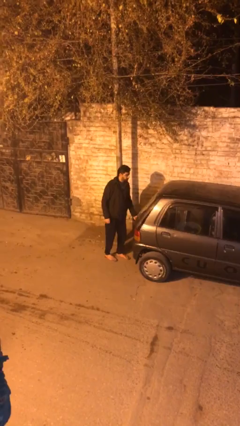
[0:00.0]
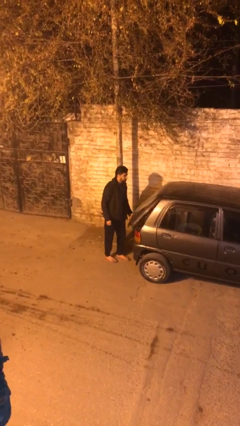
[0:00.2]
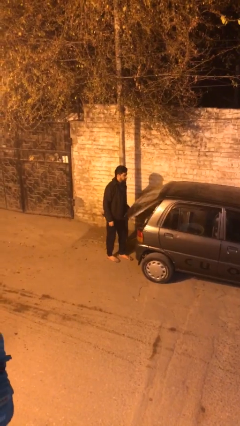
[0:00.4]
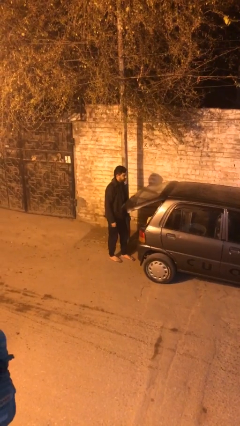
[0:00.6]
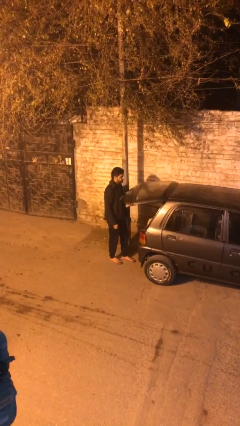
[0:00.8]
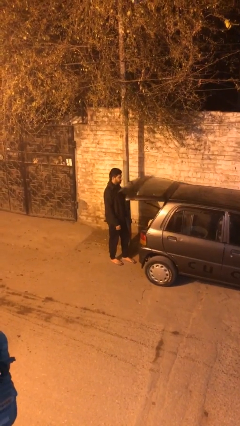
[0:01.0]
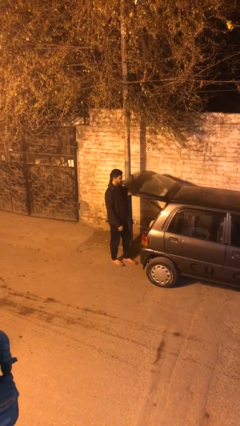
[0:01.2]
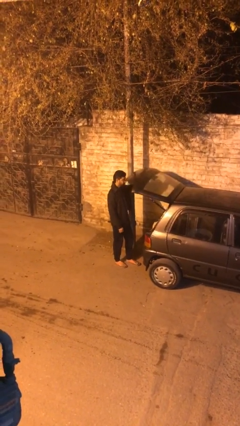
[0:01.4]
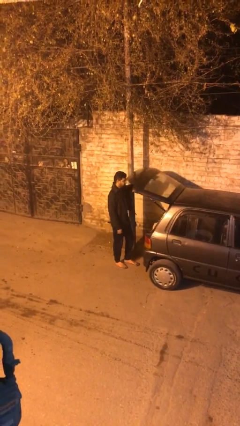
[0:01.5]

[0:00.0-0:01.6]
person opens car trunk

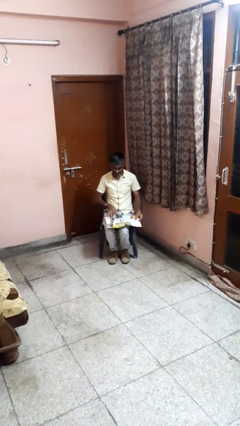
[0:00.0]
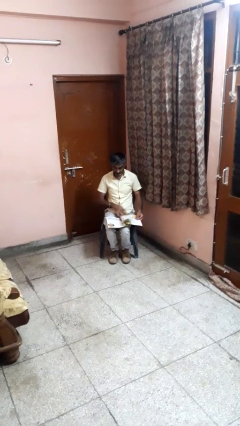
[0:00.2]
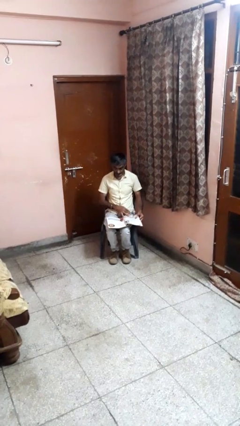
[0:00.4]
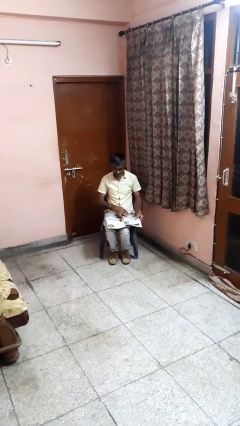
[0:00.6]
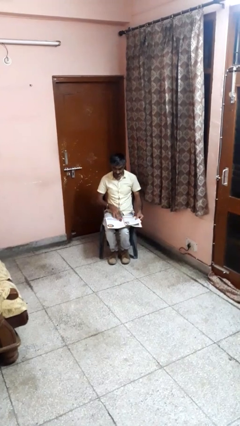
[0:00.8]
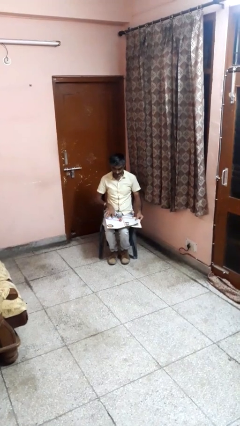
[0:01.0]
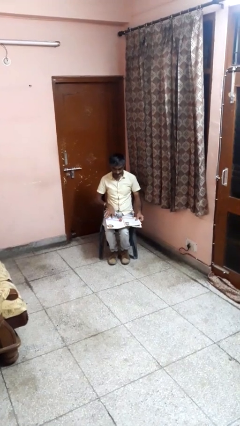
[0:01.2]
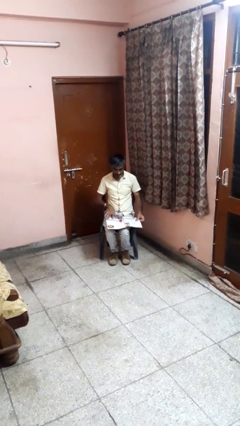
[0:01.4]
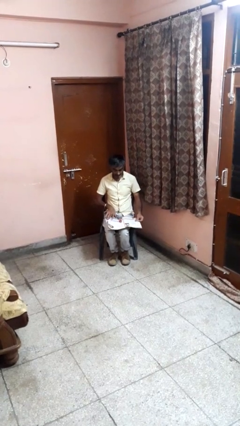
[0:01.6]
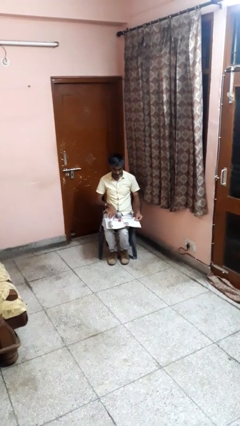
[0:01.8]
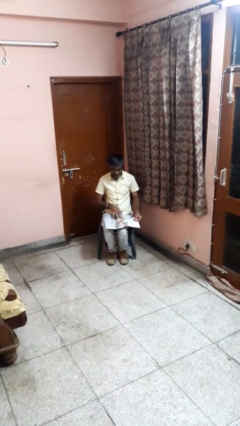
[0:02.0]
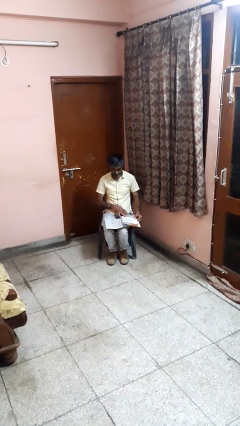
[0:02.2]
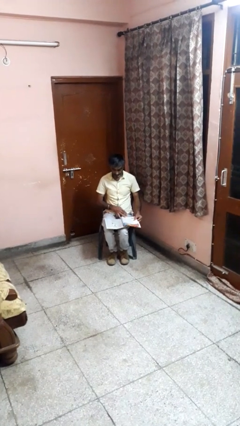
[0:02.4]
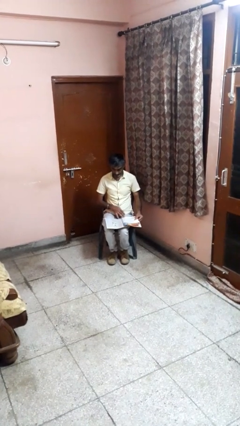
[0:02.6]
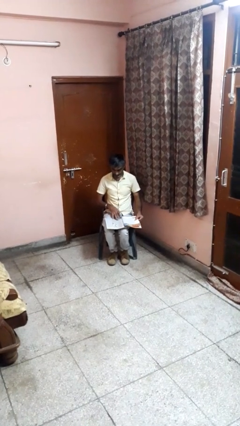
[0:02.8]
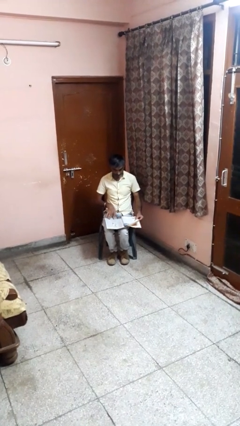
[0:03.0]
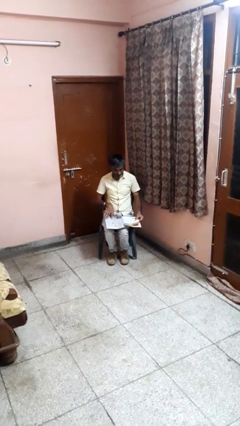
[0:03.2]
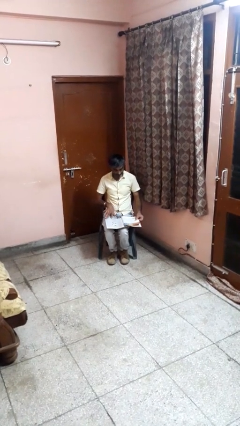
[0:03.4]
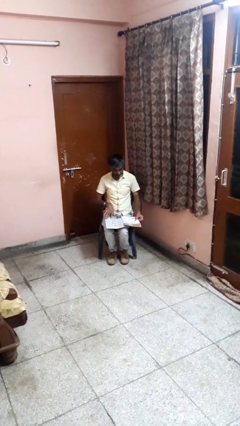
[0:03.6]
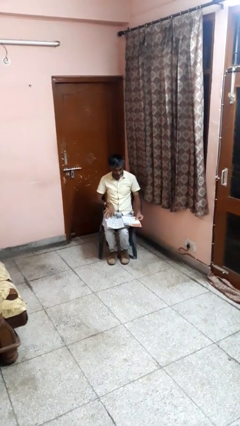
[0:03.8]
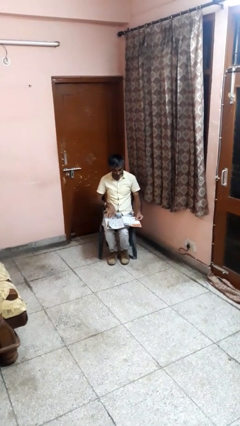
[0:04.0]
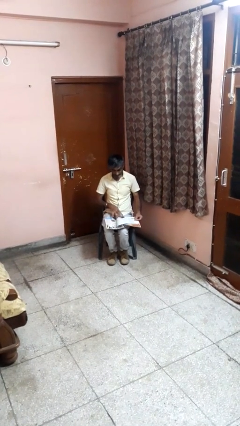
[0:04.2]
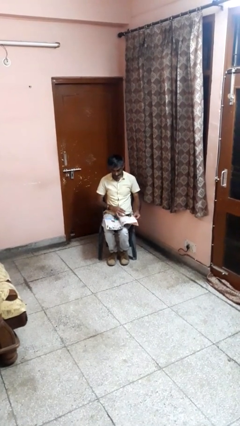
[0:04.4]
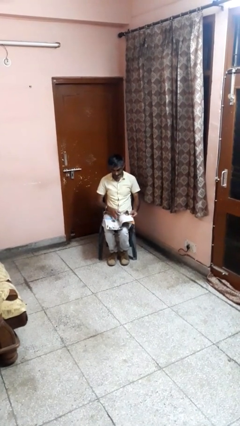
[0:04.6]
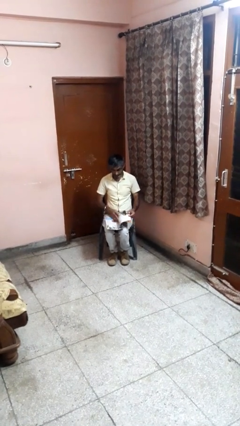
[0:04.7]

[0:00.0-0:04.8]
person reads magazine

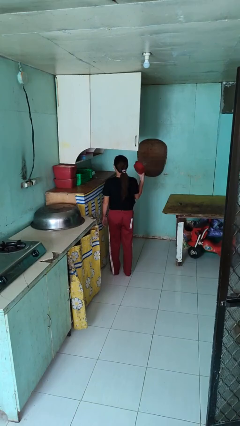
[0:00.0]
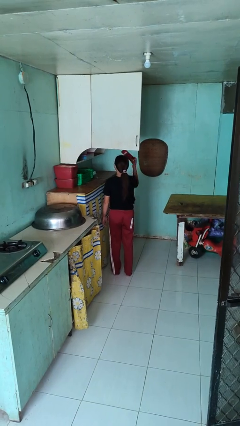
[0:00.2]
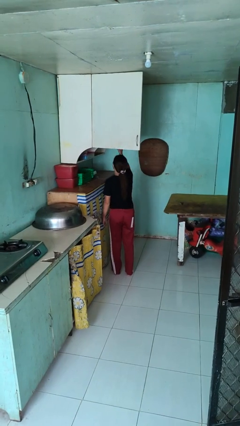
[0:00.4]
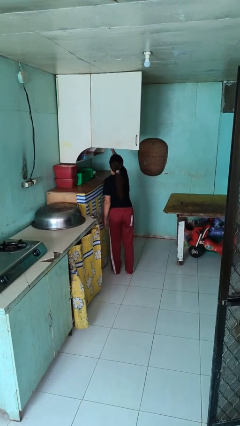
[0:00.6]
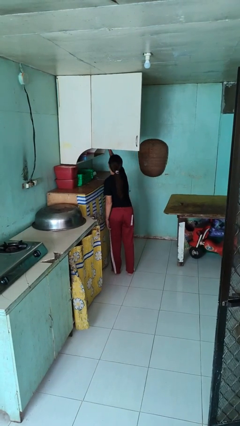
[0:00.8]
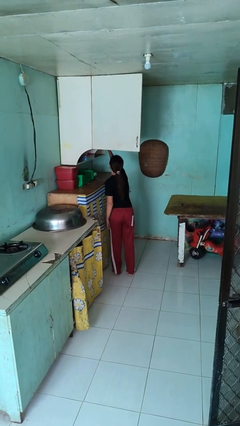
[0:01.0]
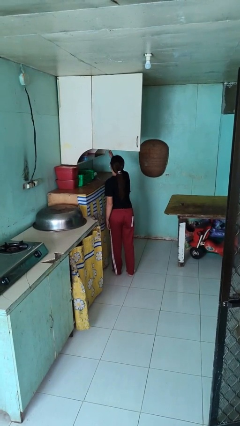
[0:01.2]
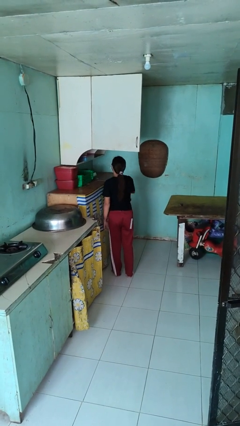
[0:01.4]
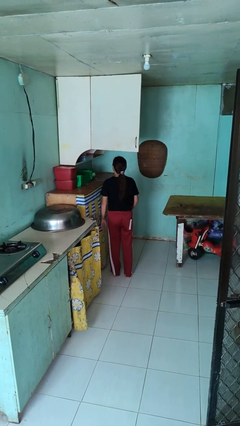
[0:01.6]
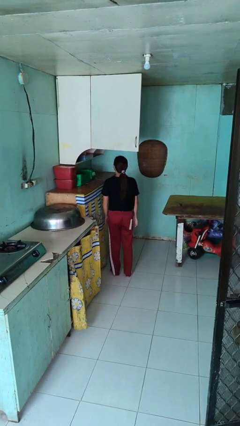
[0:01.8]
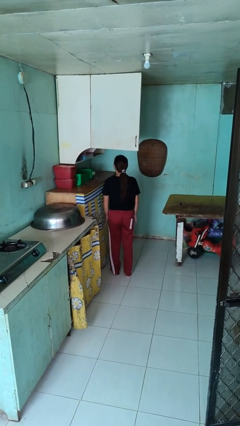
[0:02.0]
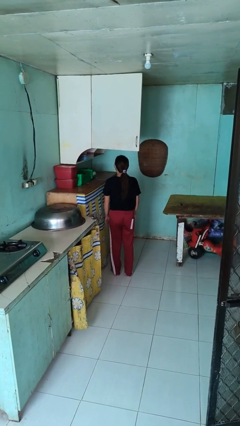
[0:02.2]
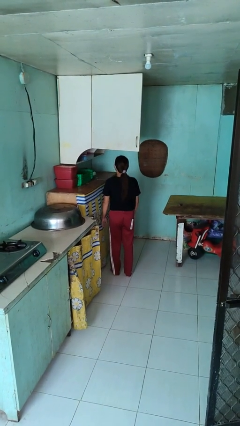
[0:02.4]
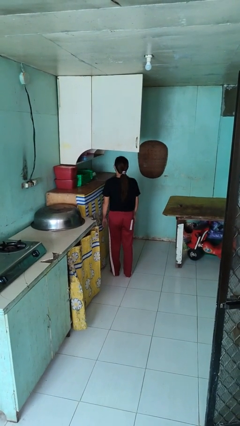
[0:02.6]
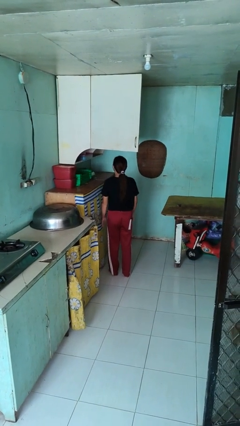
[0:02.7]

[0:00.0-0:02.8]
person puts object in cabinet

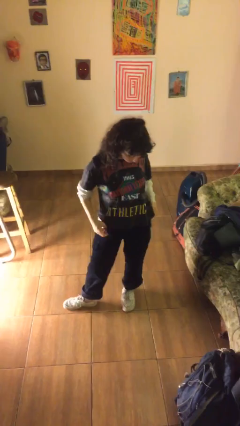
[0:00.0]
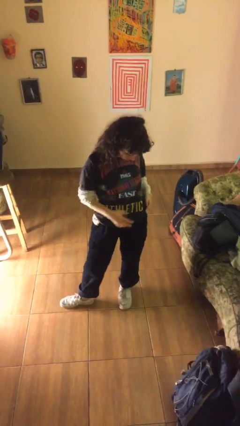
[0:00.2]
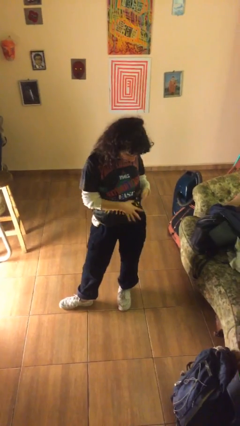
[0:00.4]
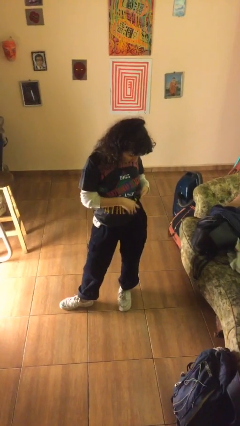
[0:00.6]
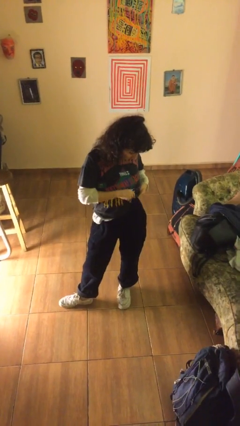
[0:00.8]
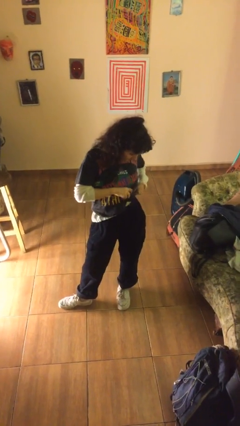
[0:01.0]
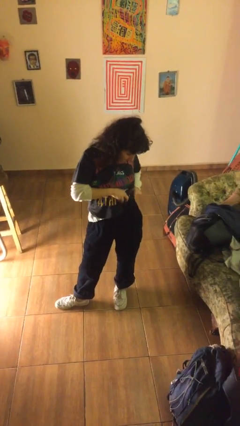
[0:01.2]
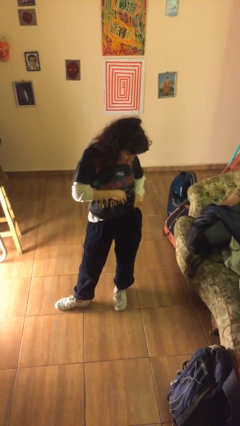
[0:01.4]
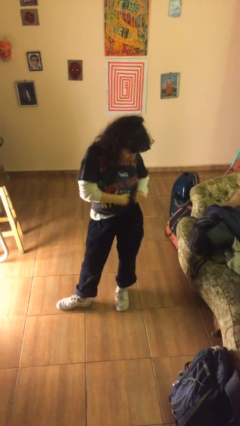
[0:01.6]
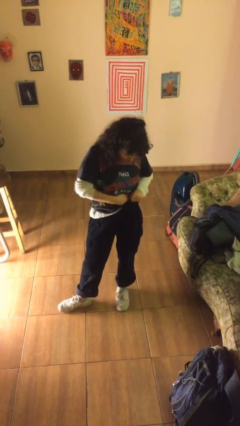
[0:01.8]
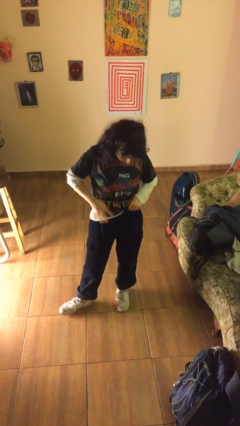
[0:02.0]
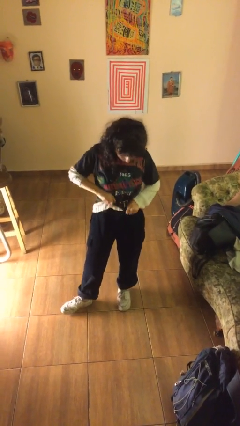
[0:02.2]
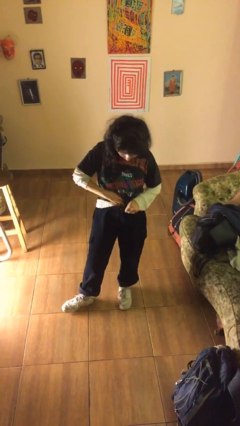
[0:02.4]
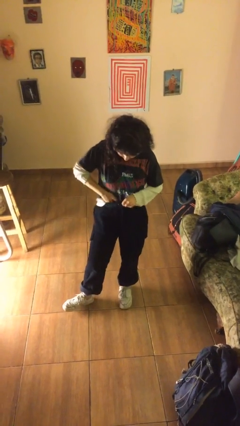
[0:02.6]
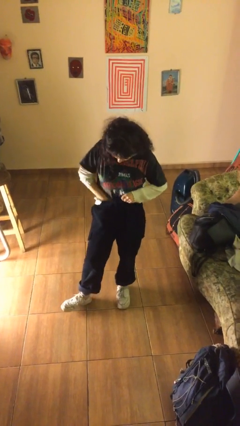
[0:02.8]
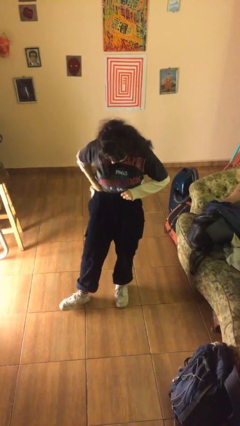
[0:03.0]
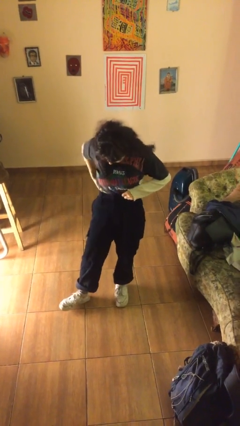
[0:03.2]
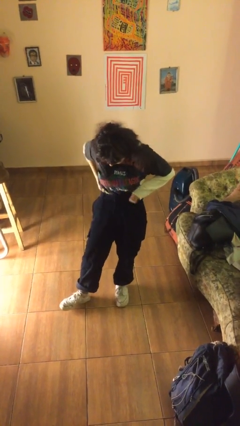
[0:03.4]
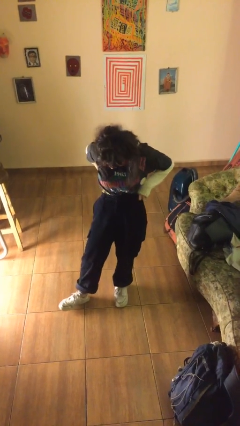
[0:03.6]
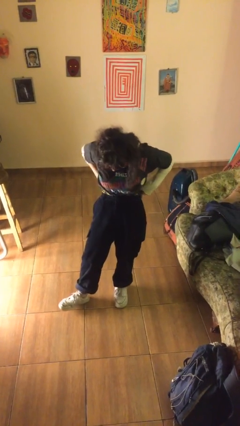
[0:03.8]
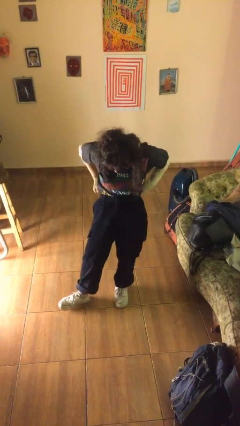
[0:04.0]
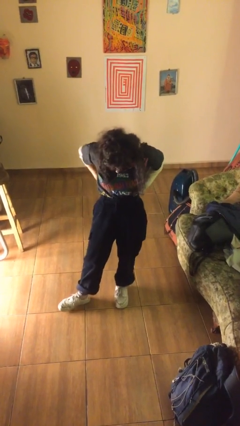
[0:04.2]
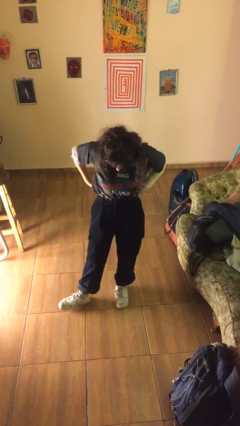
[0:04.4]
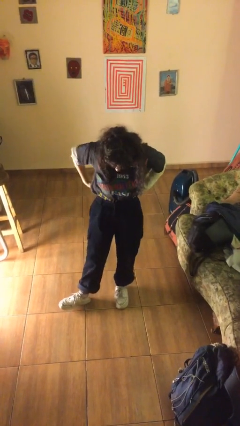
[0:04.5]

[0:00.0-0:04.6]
person tucks in shirt

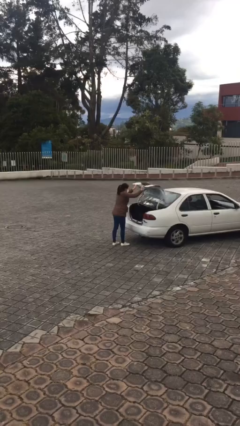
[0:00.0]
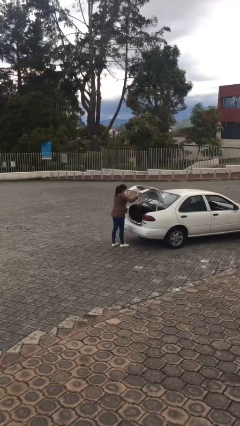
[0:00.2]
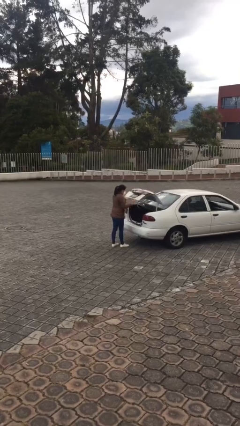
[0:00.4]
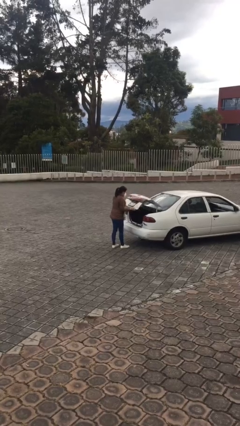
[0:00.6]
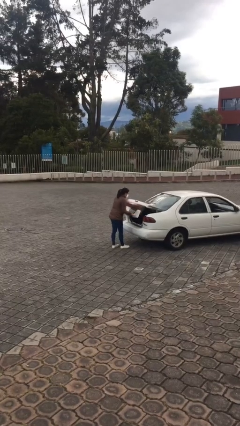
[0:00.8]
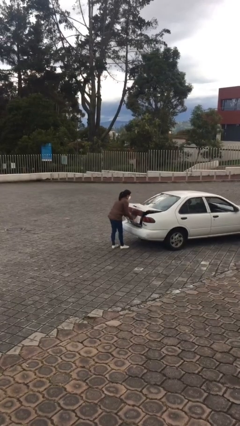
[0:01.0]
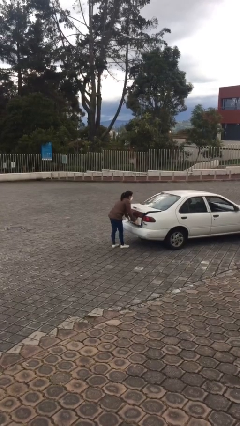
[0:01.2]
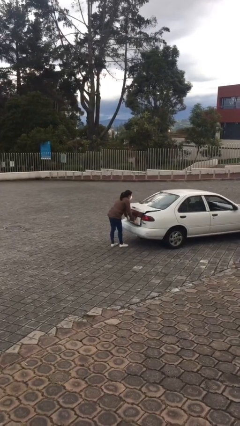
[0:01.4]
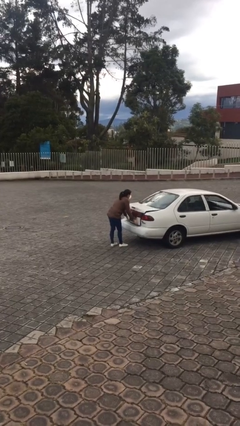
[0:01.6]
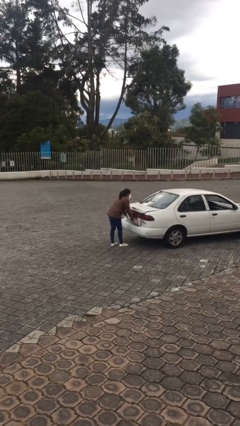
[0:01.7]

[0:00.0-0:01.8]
person closes car trunk

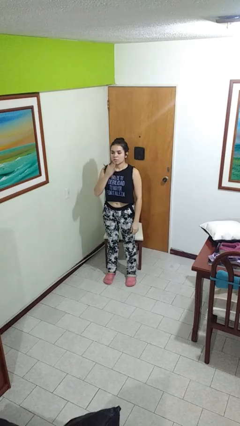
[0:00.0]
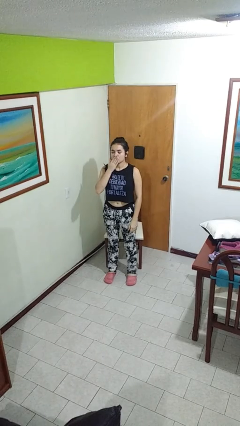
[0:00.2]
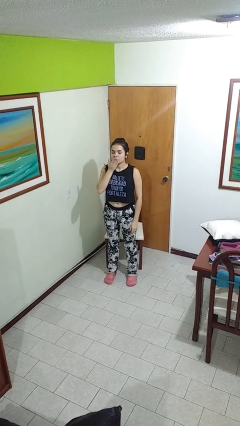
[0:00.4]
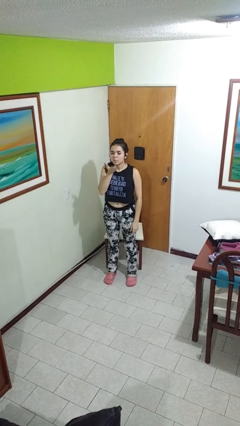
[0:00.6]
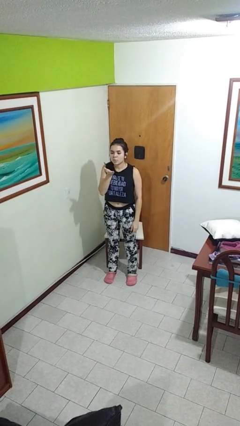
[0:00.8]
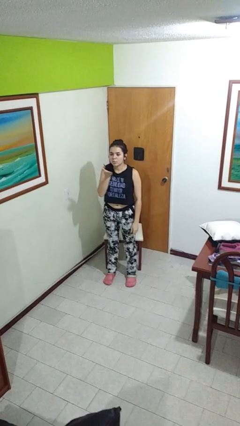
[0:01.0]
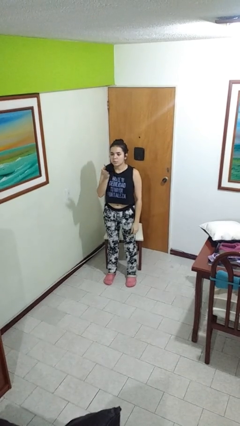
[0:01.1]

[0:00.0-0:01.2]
person gestures blow kiss

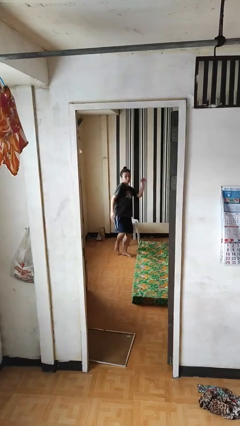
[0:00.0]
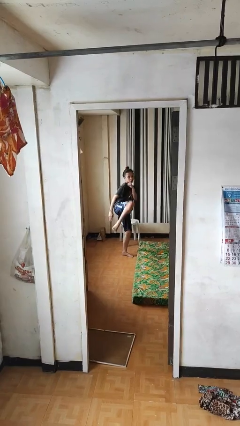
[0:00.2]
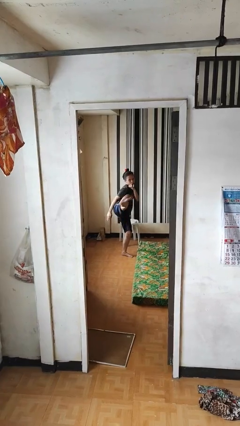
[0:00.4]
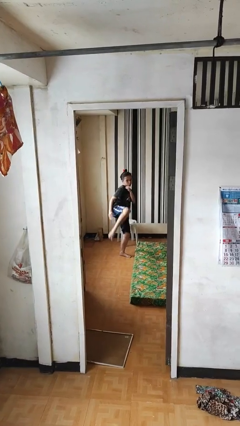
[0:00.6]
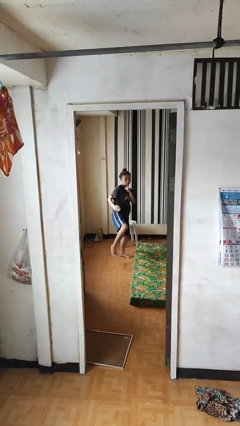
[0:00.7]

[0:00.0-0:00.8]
person karate kicks
